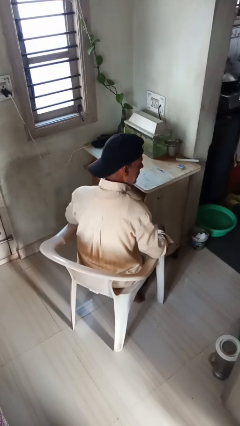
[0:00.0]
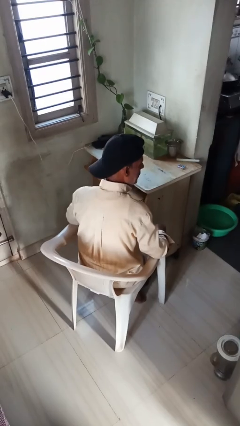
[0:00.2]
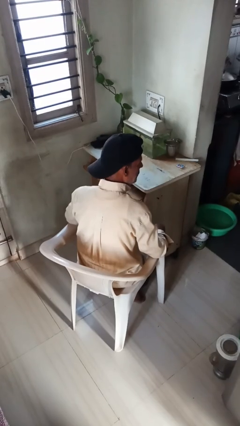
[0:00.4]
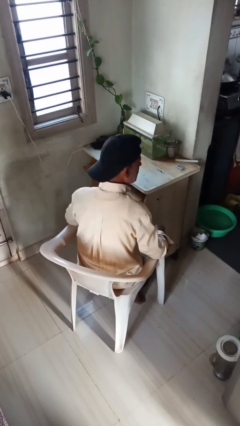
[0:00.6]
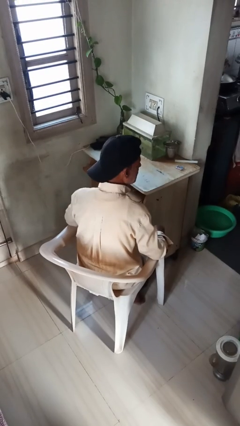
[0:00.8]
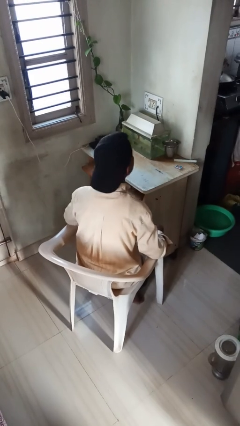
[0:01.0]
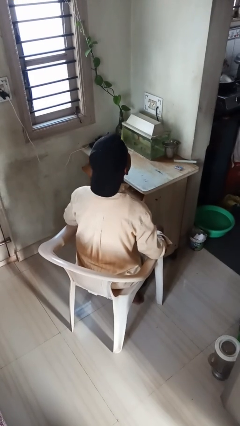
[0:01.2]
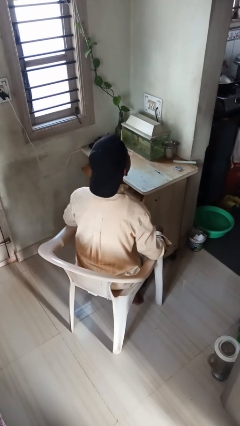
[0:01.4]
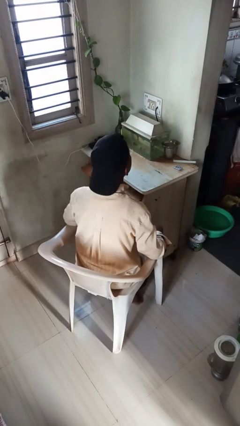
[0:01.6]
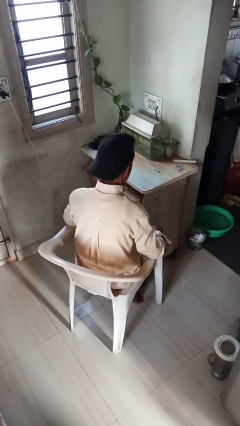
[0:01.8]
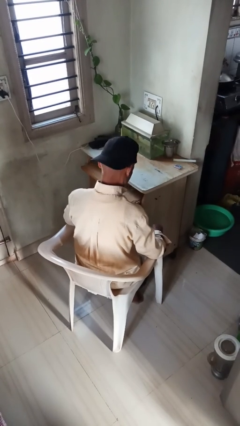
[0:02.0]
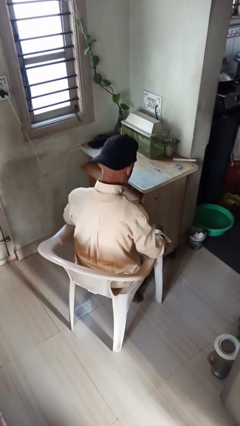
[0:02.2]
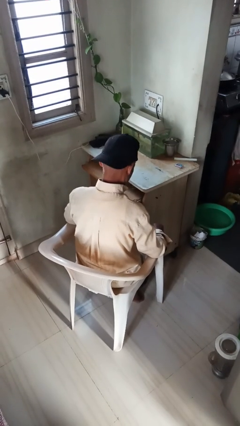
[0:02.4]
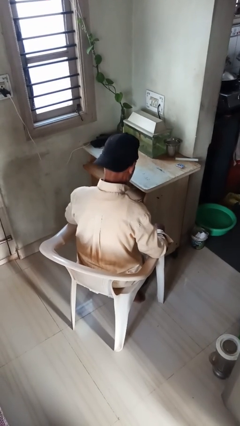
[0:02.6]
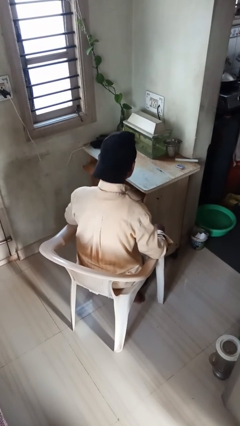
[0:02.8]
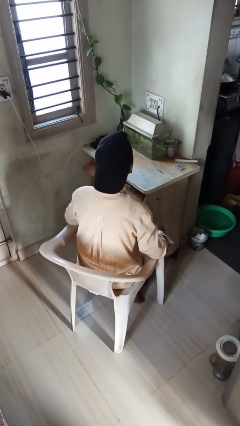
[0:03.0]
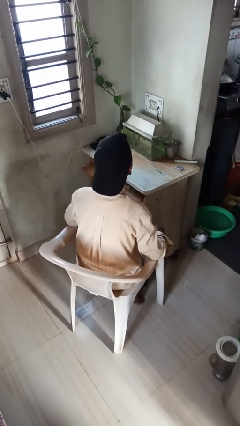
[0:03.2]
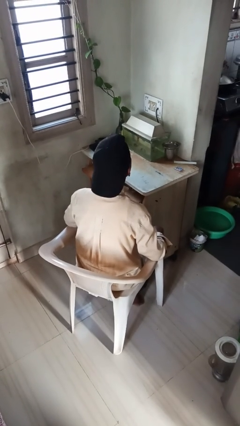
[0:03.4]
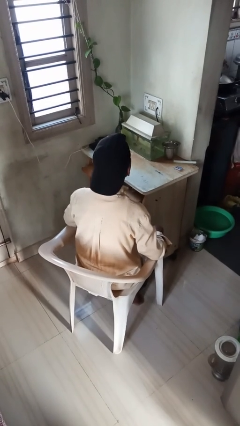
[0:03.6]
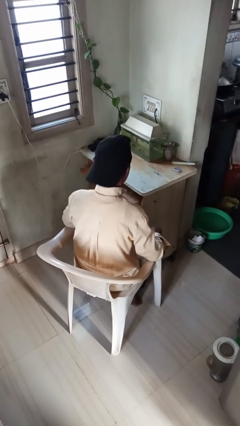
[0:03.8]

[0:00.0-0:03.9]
person nods head

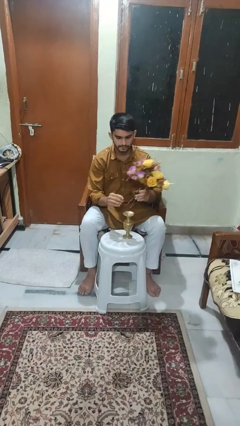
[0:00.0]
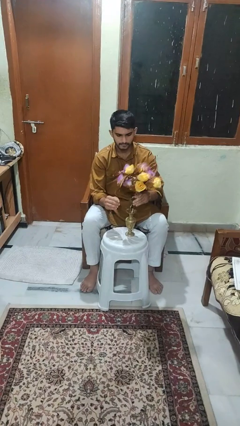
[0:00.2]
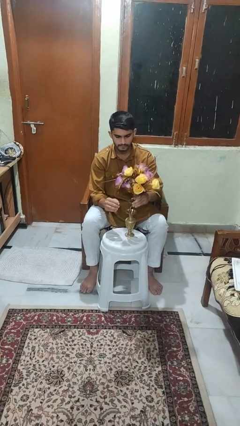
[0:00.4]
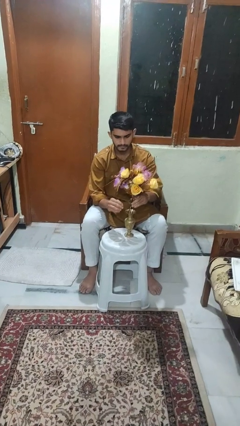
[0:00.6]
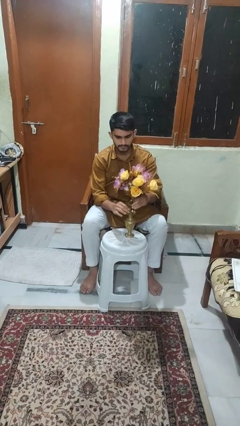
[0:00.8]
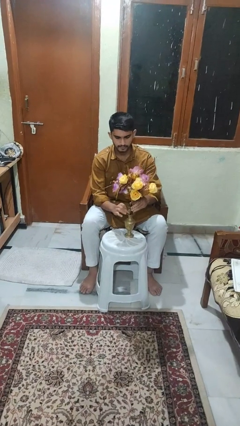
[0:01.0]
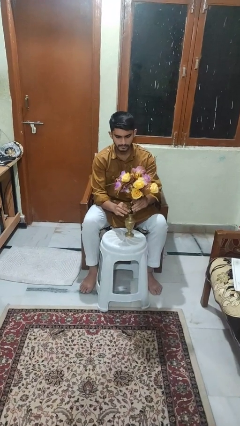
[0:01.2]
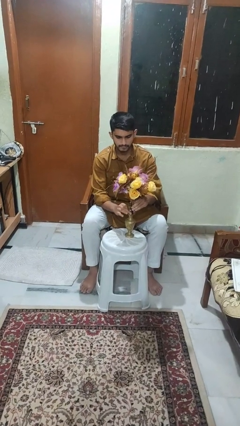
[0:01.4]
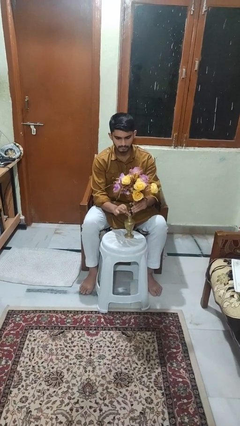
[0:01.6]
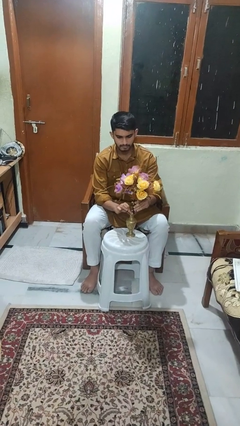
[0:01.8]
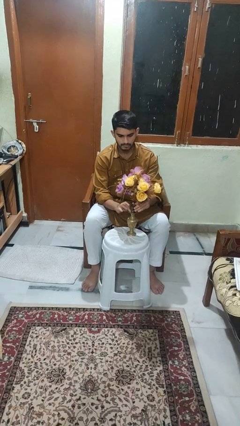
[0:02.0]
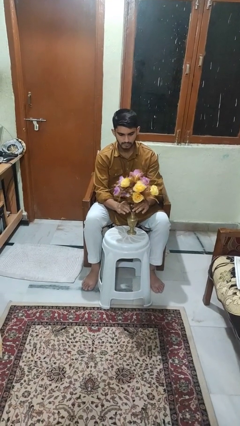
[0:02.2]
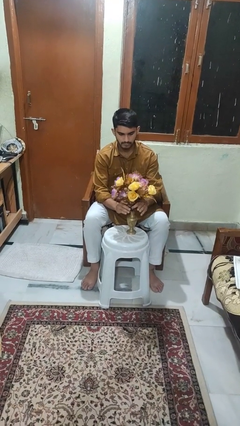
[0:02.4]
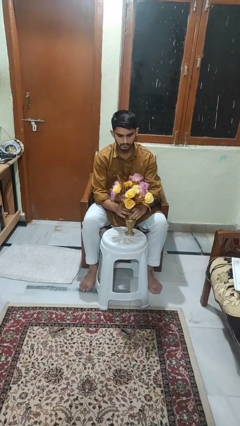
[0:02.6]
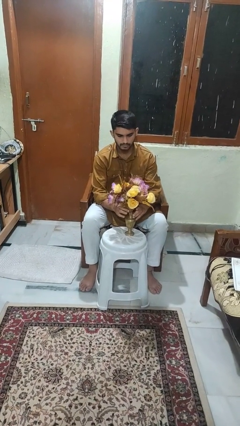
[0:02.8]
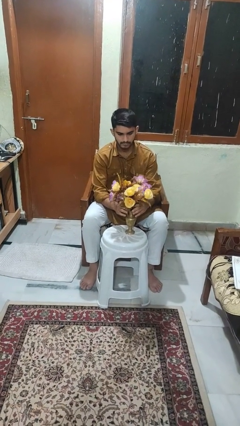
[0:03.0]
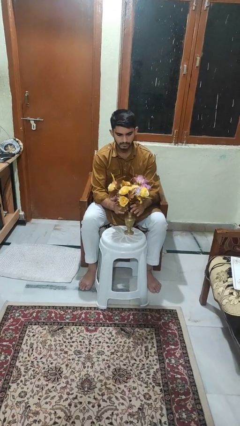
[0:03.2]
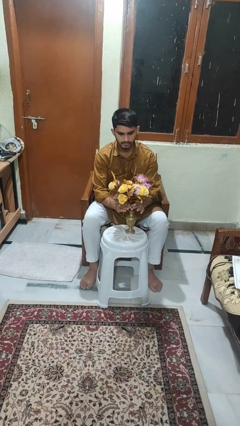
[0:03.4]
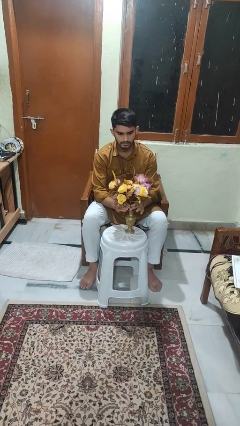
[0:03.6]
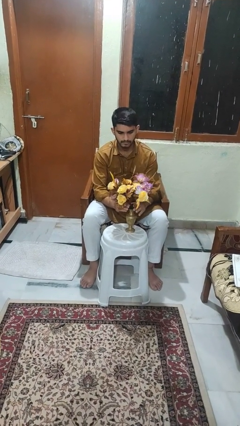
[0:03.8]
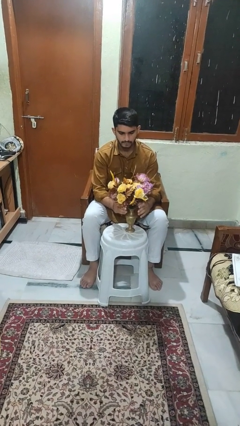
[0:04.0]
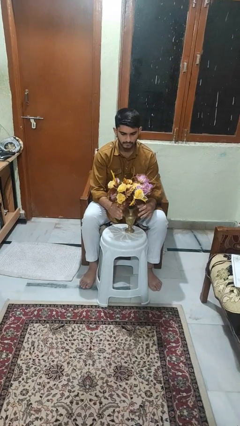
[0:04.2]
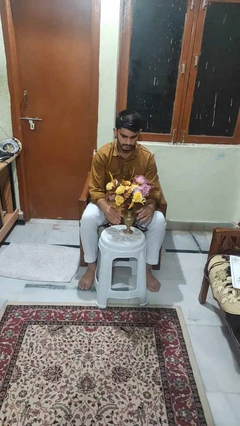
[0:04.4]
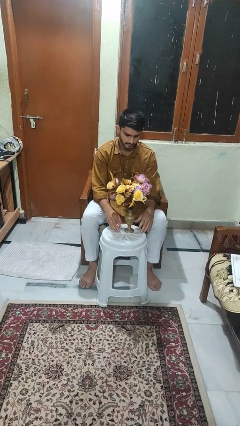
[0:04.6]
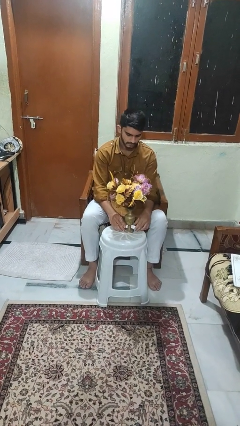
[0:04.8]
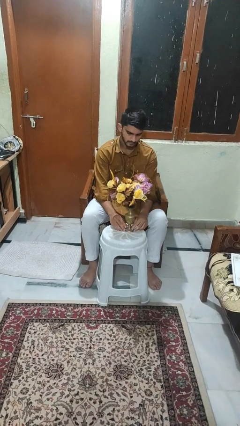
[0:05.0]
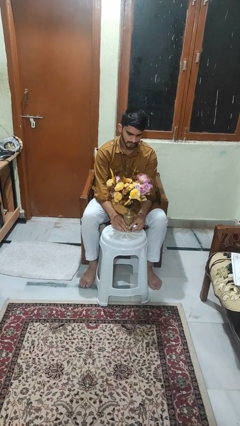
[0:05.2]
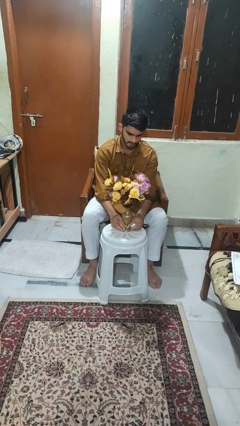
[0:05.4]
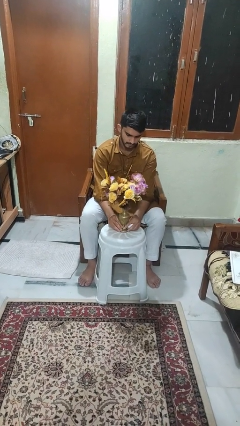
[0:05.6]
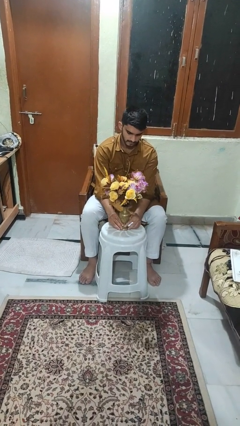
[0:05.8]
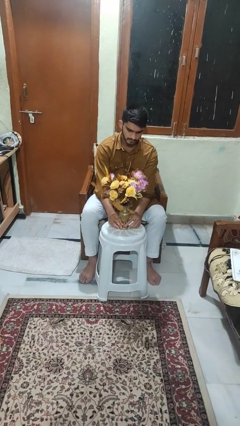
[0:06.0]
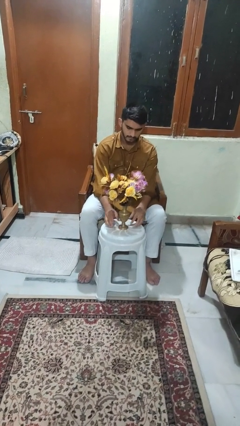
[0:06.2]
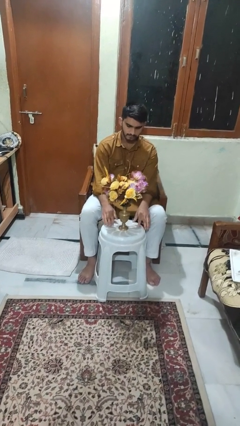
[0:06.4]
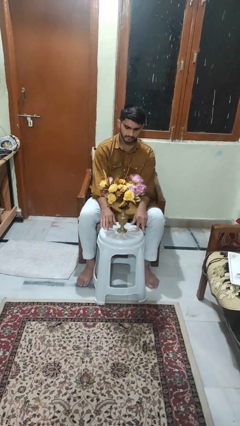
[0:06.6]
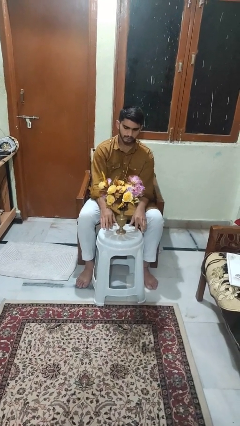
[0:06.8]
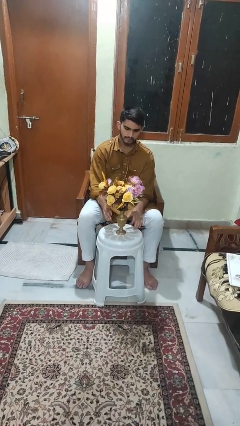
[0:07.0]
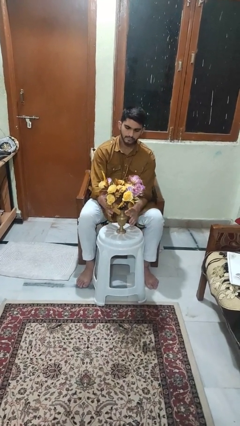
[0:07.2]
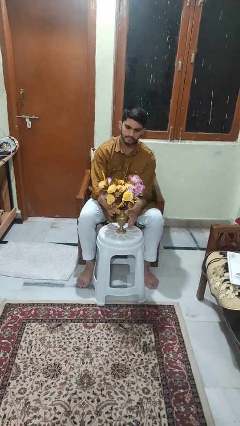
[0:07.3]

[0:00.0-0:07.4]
person arranges flowers in vase

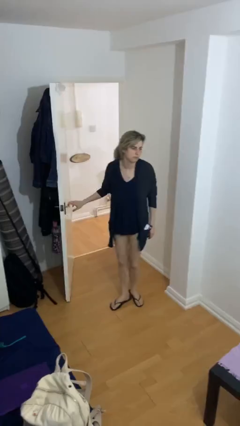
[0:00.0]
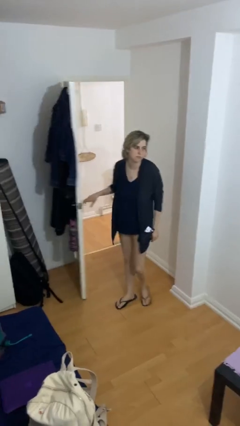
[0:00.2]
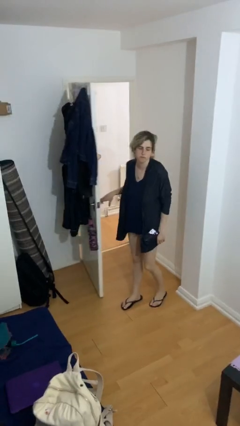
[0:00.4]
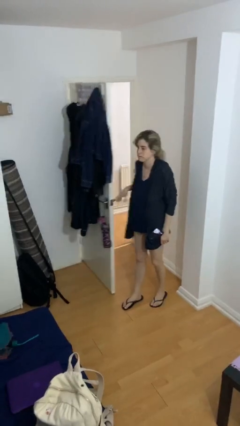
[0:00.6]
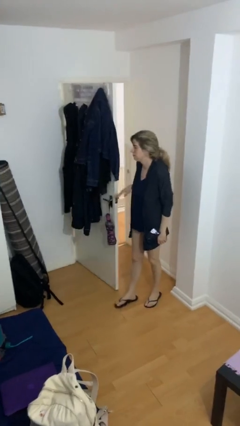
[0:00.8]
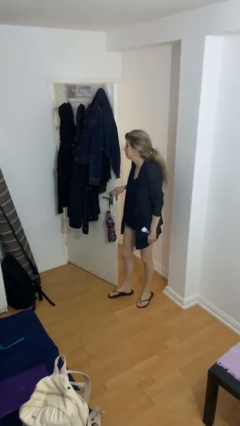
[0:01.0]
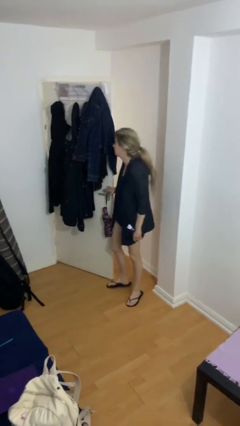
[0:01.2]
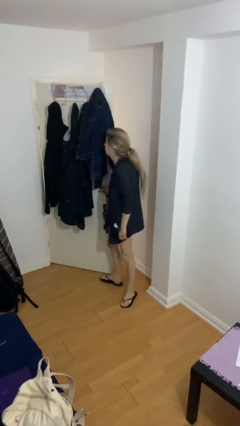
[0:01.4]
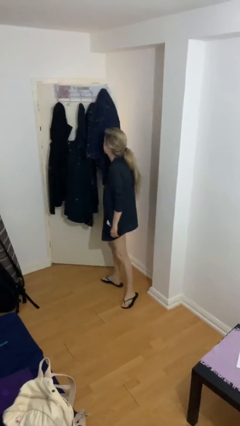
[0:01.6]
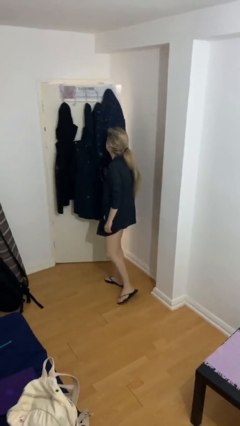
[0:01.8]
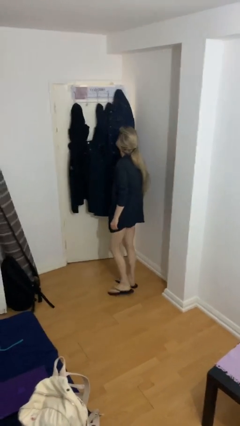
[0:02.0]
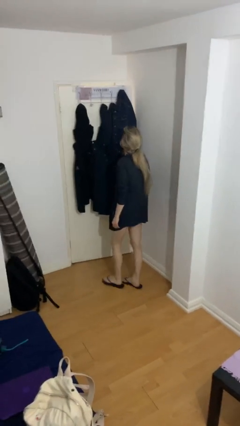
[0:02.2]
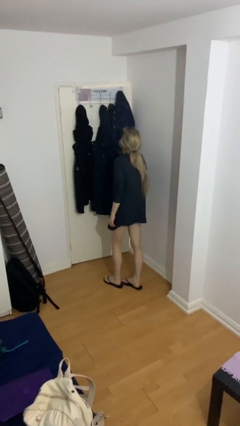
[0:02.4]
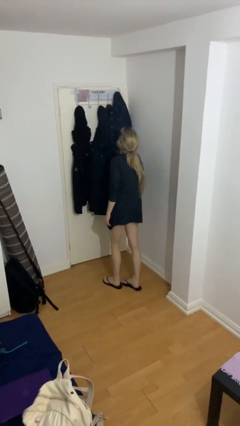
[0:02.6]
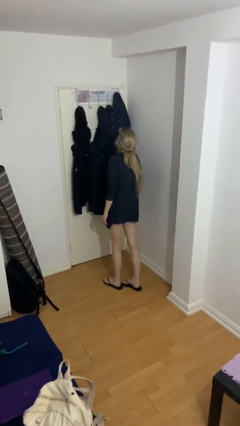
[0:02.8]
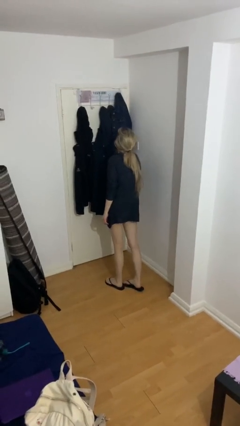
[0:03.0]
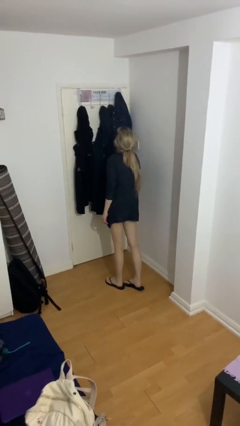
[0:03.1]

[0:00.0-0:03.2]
person closes facility door

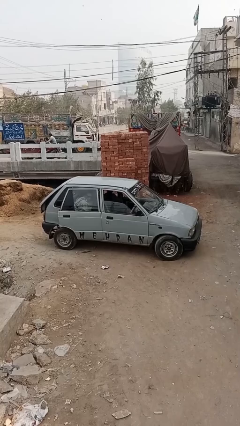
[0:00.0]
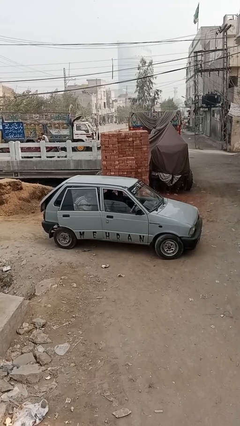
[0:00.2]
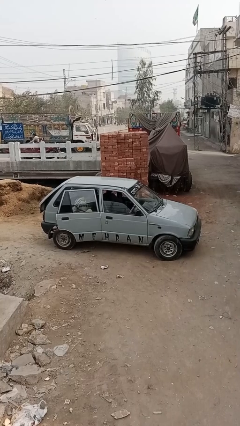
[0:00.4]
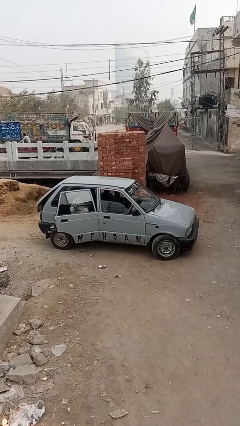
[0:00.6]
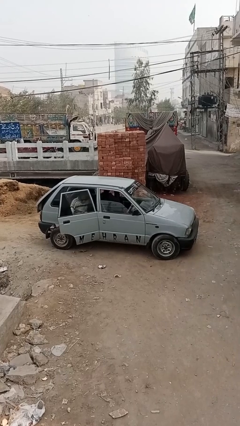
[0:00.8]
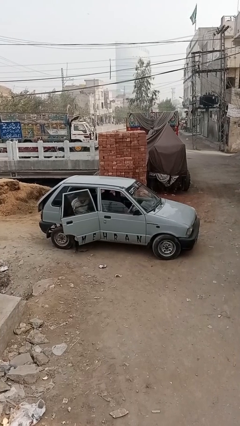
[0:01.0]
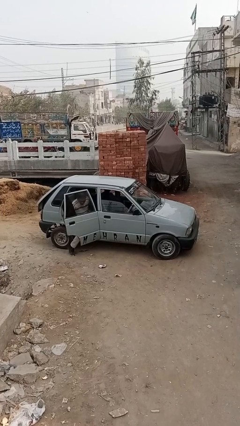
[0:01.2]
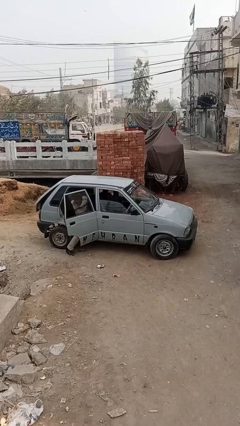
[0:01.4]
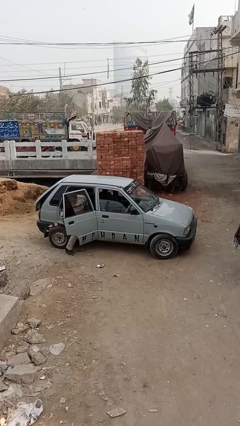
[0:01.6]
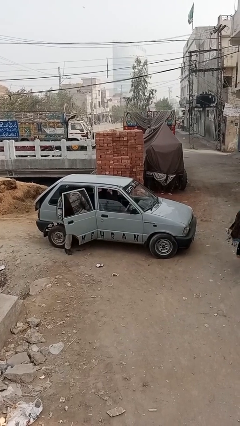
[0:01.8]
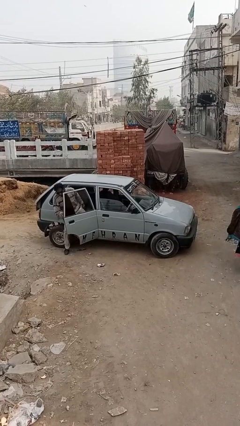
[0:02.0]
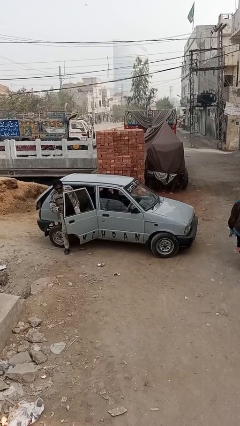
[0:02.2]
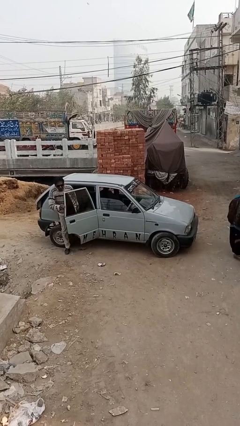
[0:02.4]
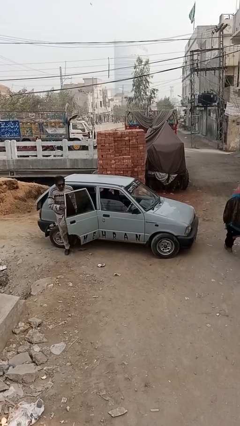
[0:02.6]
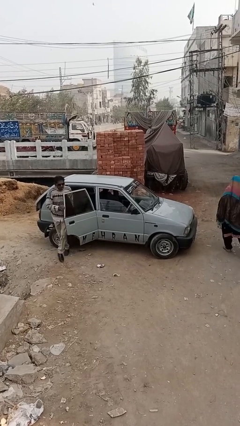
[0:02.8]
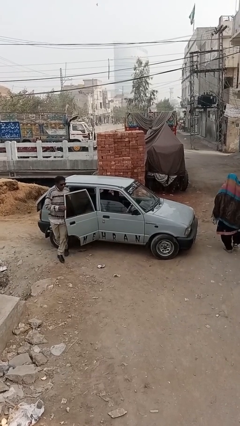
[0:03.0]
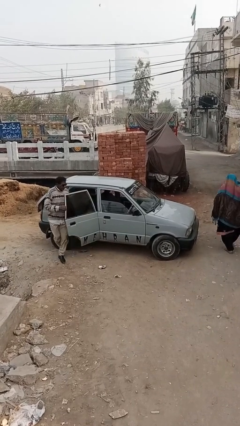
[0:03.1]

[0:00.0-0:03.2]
car drops off person

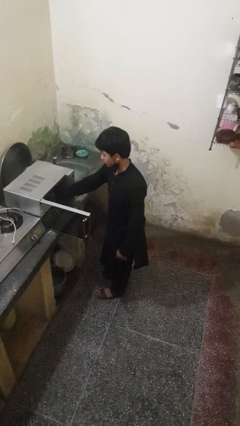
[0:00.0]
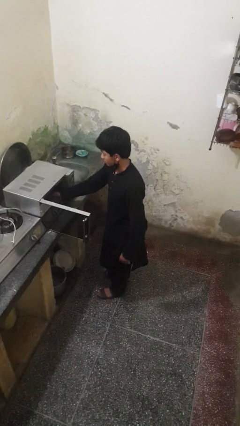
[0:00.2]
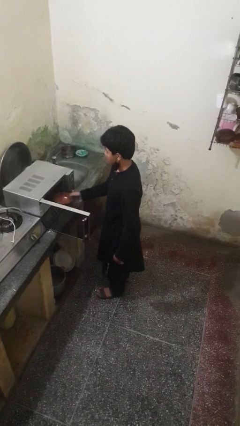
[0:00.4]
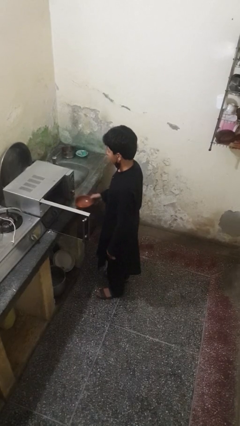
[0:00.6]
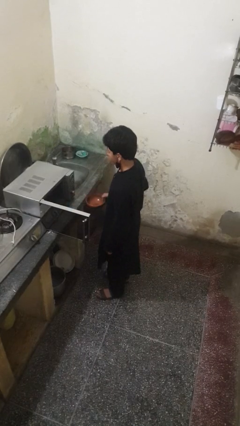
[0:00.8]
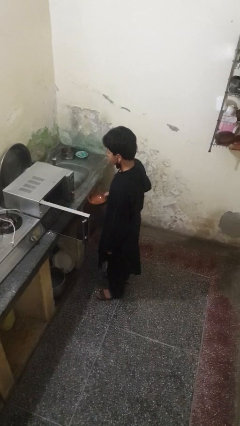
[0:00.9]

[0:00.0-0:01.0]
person takes object from microwave
